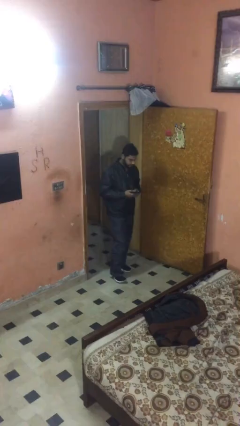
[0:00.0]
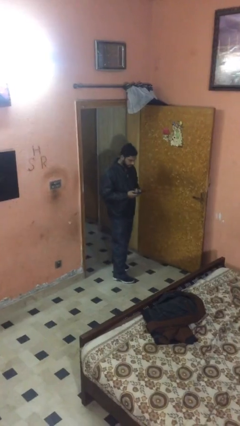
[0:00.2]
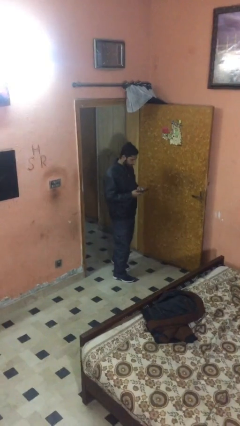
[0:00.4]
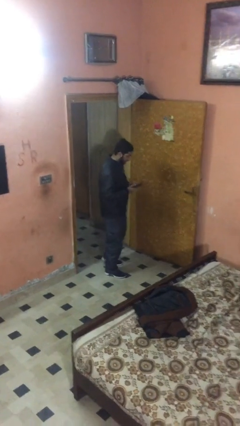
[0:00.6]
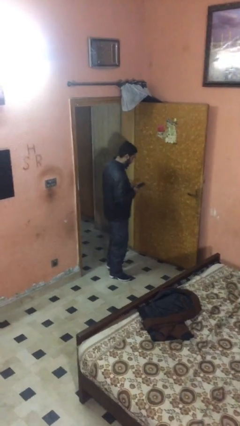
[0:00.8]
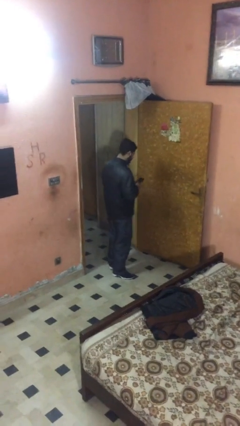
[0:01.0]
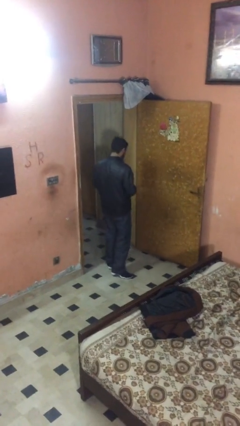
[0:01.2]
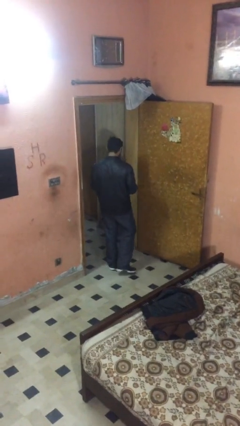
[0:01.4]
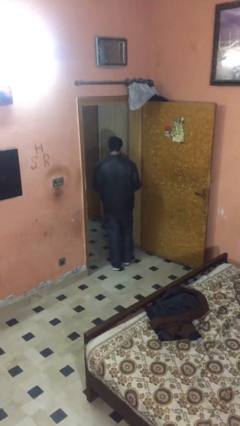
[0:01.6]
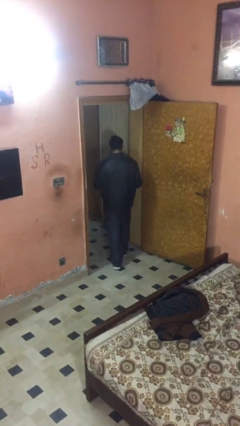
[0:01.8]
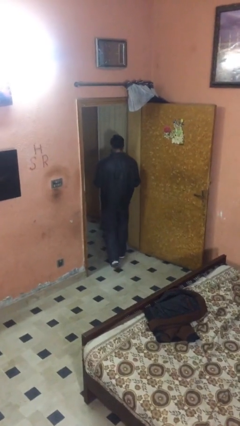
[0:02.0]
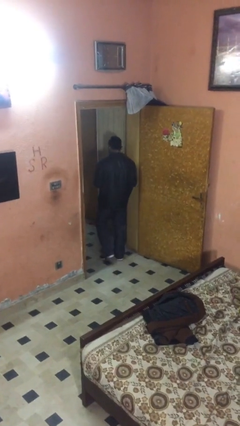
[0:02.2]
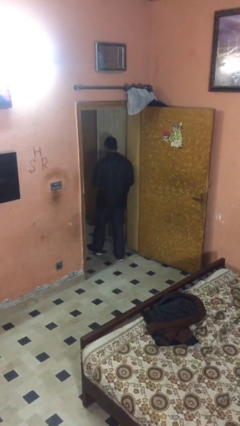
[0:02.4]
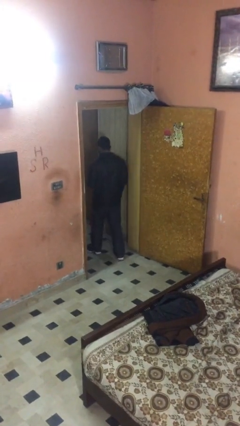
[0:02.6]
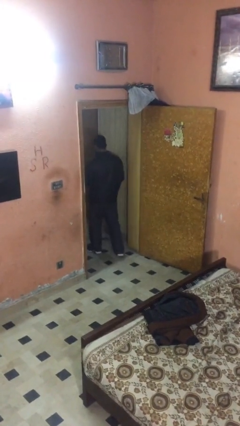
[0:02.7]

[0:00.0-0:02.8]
person exits scene through structure

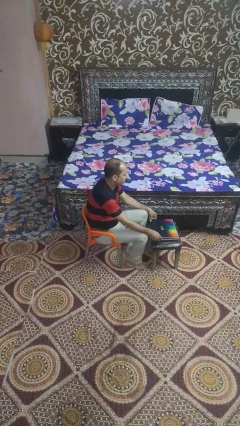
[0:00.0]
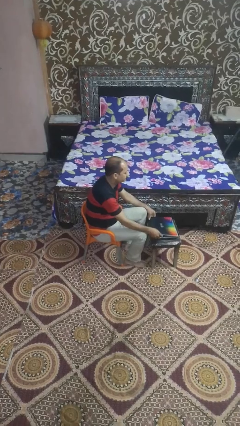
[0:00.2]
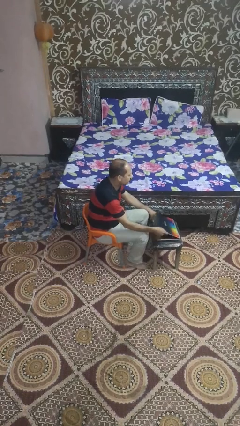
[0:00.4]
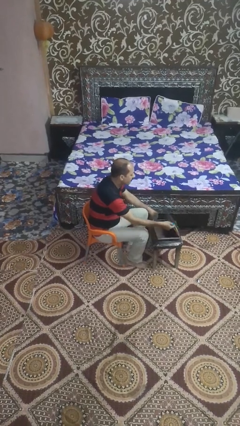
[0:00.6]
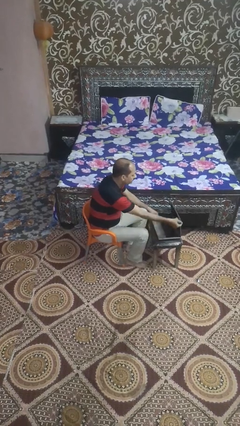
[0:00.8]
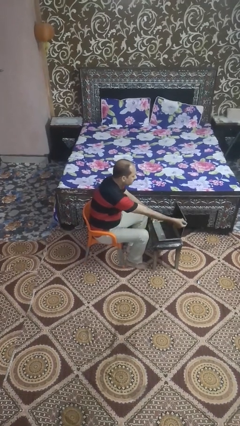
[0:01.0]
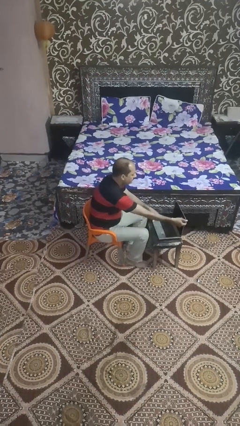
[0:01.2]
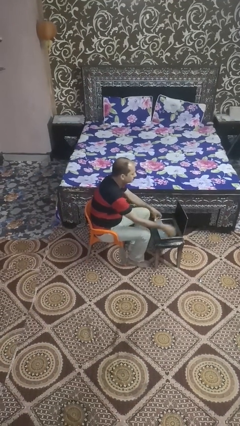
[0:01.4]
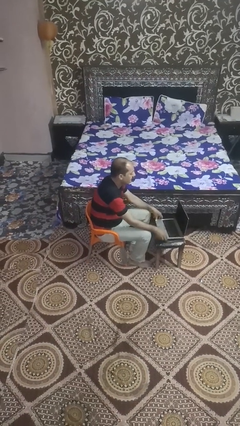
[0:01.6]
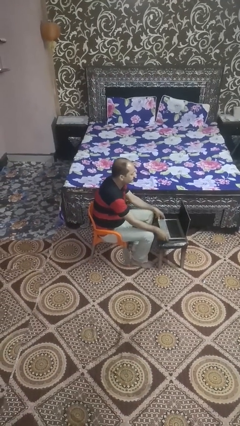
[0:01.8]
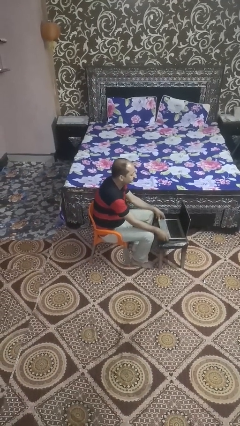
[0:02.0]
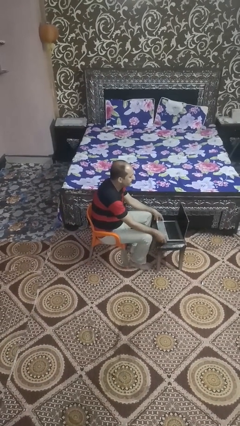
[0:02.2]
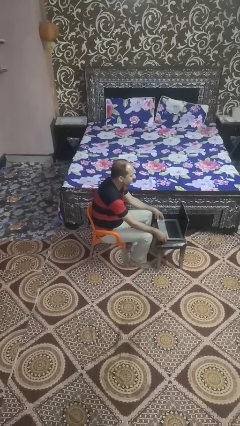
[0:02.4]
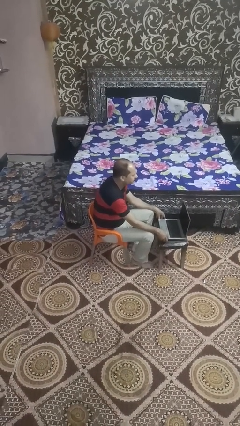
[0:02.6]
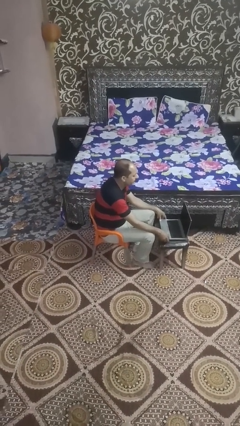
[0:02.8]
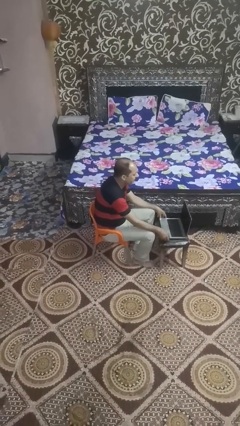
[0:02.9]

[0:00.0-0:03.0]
person opens laptop

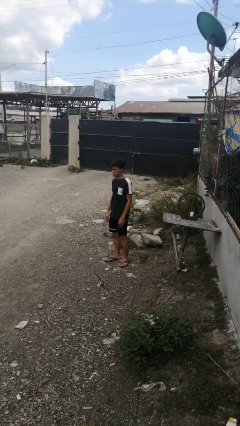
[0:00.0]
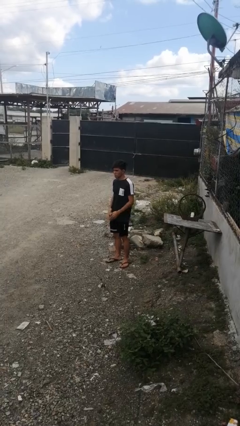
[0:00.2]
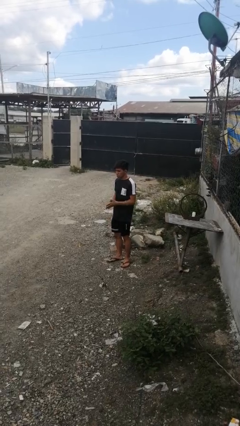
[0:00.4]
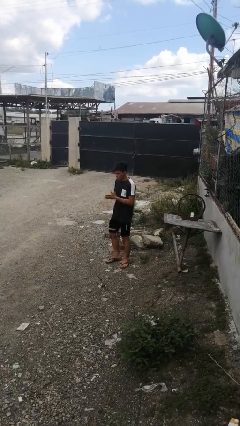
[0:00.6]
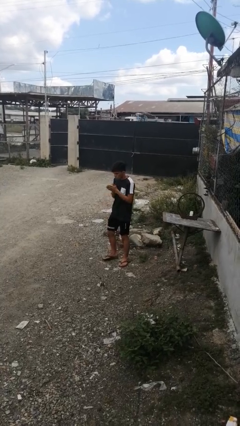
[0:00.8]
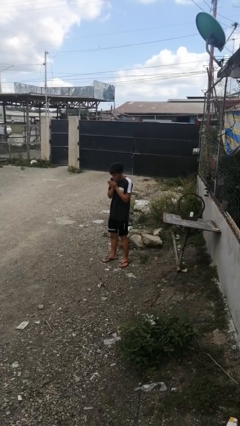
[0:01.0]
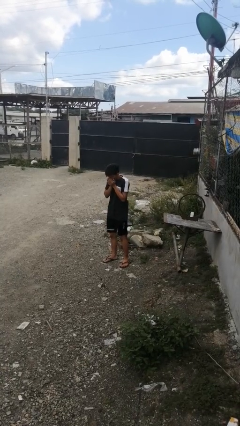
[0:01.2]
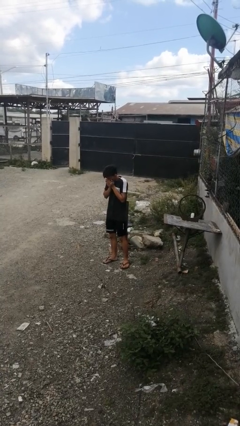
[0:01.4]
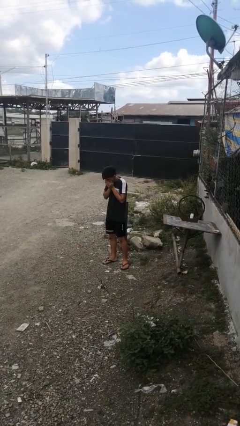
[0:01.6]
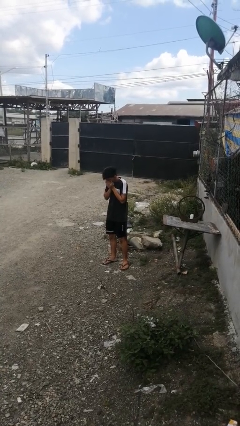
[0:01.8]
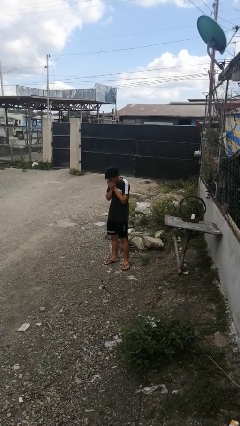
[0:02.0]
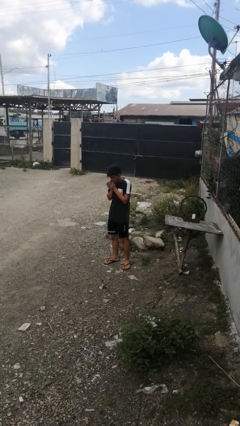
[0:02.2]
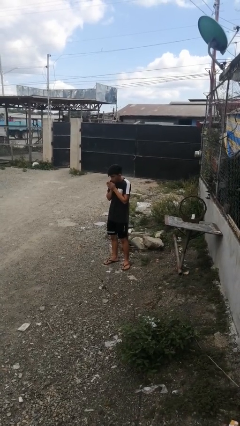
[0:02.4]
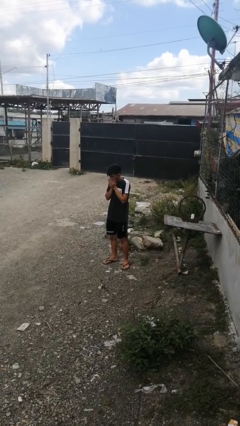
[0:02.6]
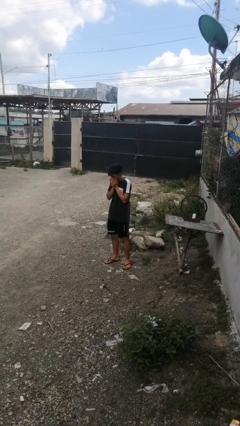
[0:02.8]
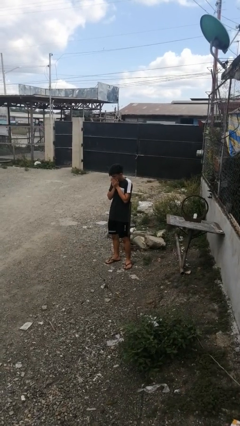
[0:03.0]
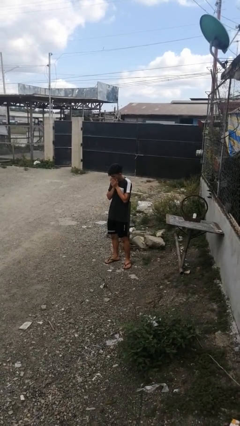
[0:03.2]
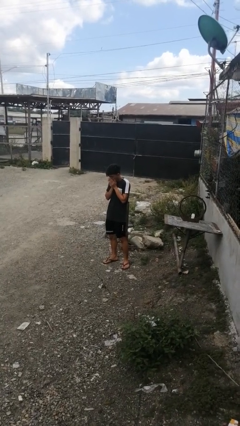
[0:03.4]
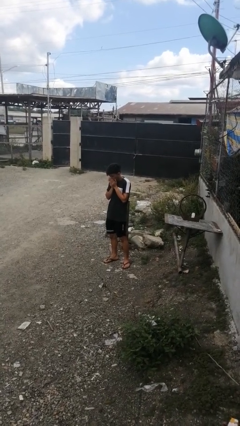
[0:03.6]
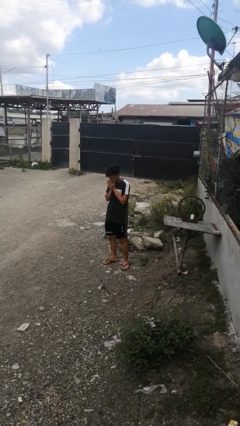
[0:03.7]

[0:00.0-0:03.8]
person blows into hands

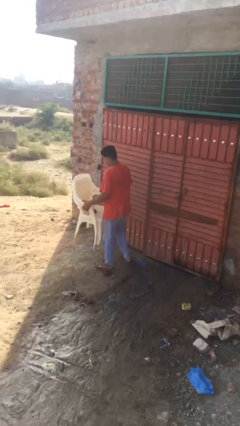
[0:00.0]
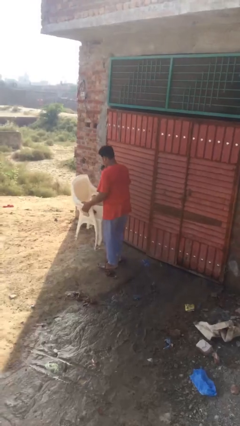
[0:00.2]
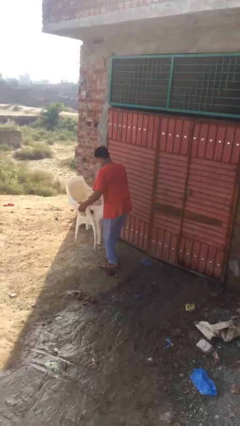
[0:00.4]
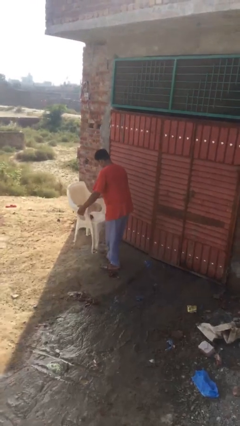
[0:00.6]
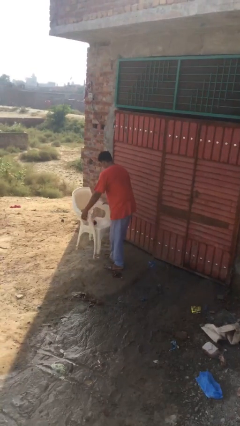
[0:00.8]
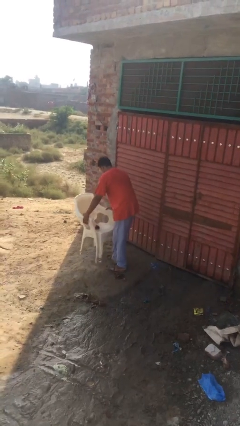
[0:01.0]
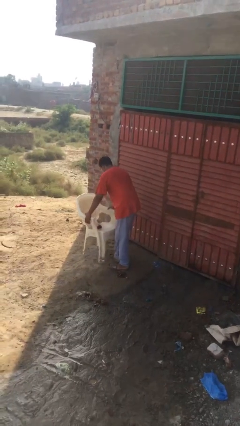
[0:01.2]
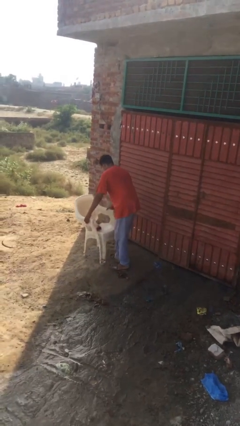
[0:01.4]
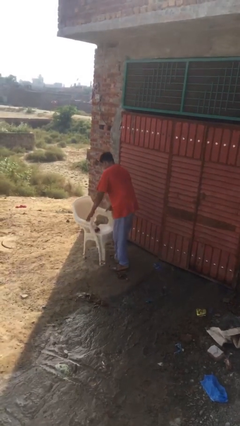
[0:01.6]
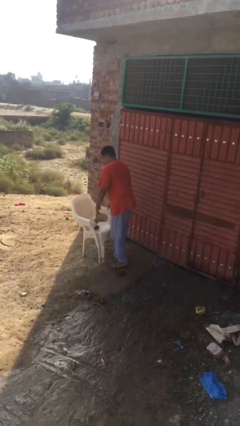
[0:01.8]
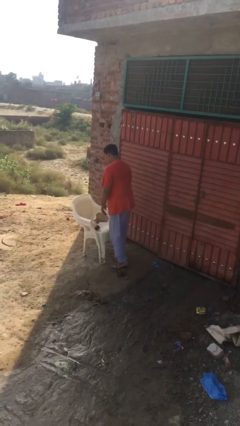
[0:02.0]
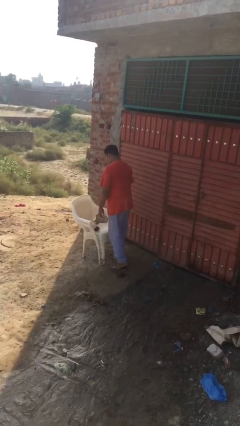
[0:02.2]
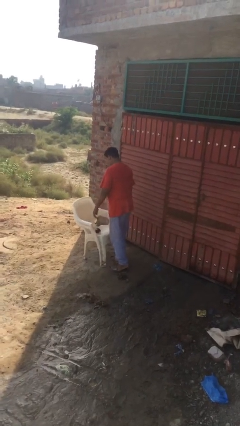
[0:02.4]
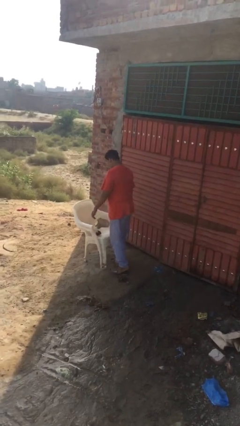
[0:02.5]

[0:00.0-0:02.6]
person puts down object on floor

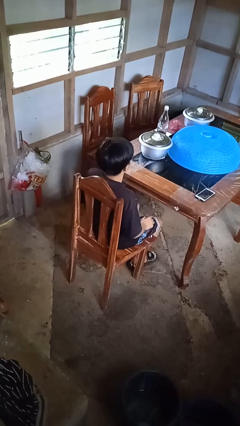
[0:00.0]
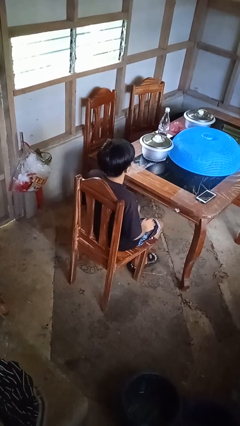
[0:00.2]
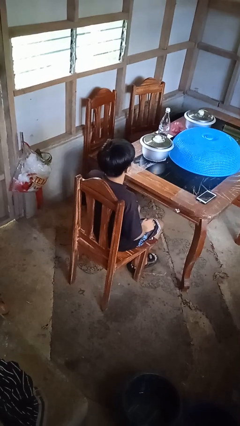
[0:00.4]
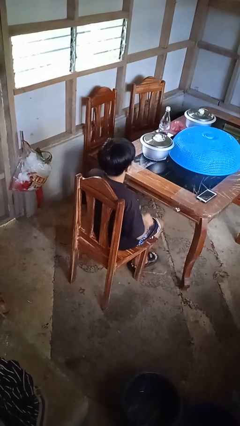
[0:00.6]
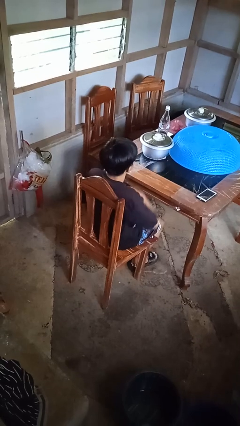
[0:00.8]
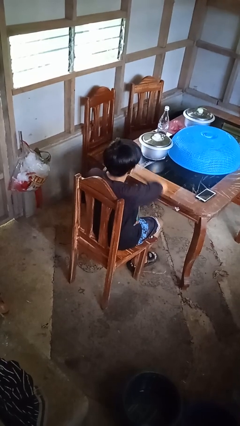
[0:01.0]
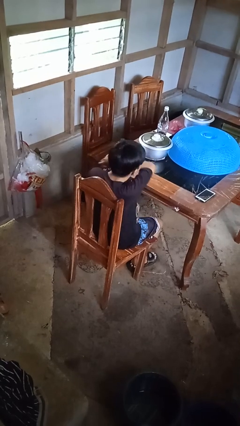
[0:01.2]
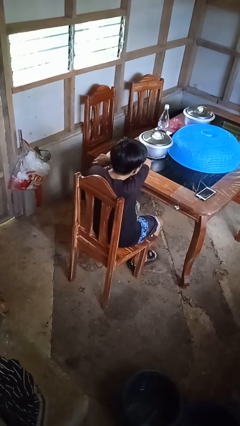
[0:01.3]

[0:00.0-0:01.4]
person sneezes into arm

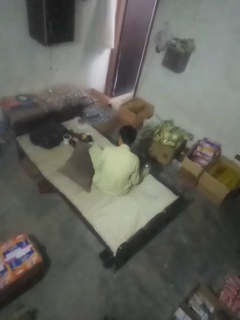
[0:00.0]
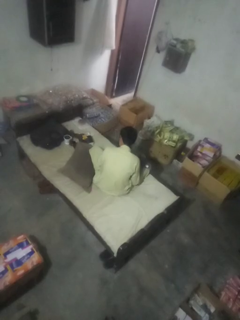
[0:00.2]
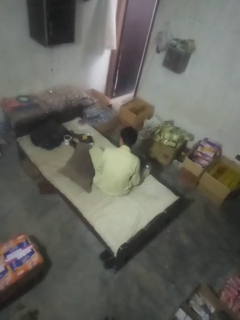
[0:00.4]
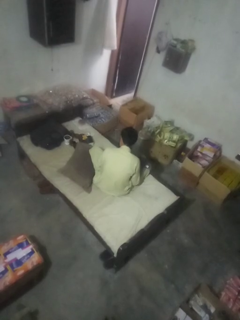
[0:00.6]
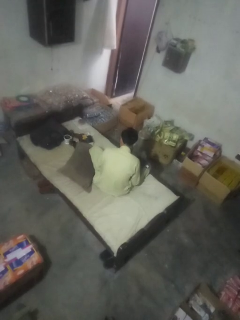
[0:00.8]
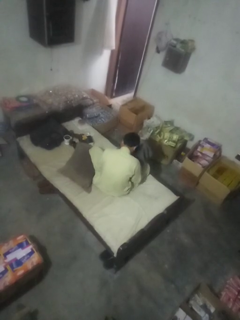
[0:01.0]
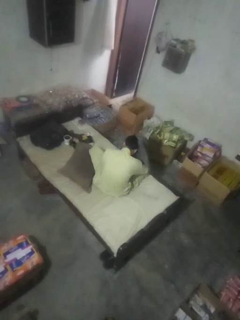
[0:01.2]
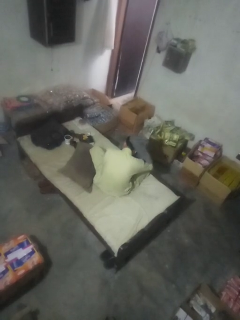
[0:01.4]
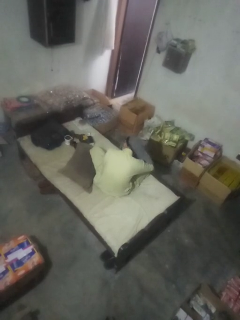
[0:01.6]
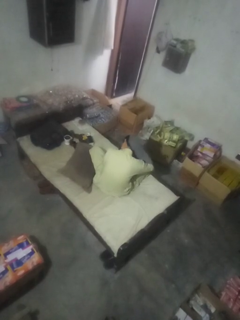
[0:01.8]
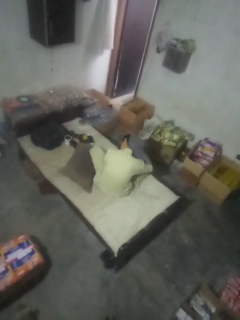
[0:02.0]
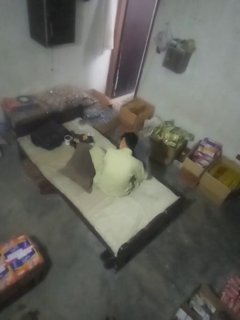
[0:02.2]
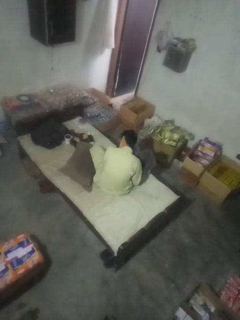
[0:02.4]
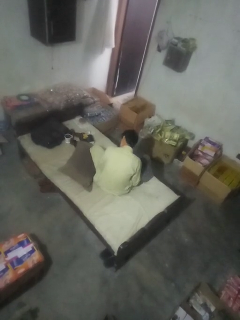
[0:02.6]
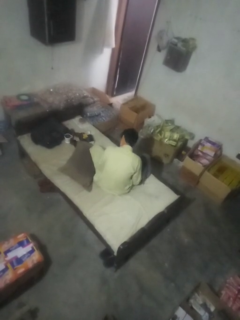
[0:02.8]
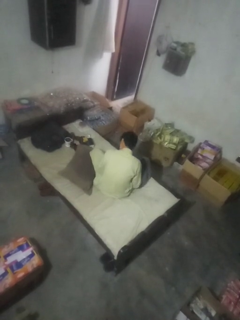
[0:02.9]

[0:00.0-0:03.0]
person dries hair with towel

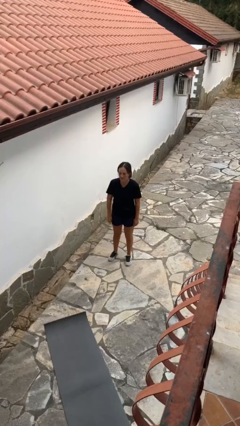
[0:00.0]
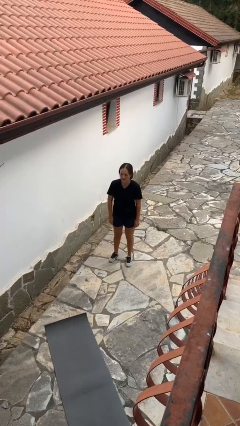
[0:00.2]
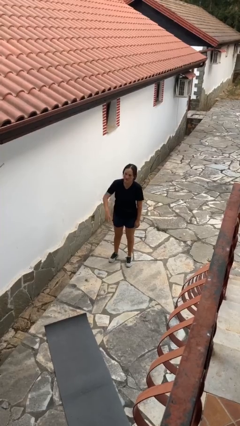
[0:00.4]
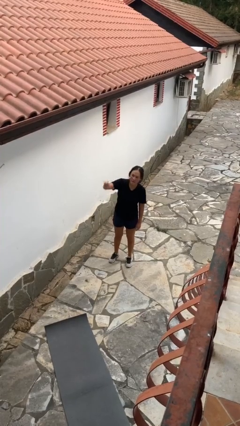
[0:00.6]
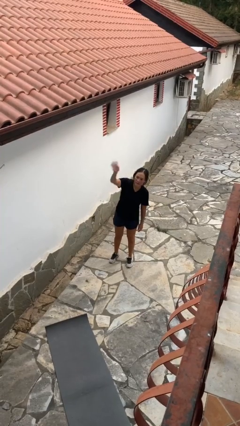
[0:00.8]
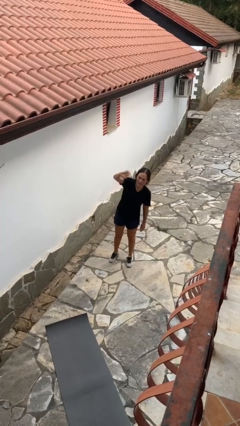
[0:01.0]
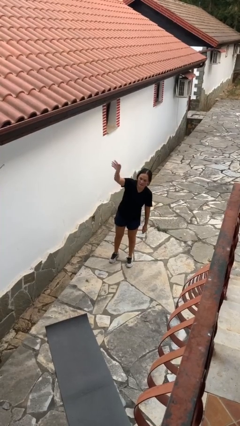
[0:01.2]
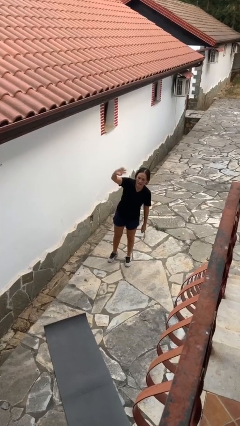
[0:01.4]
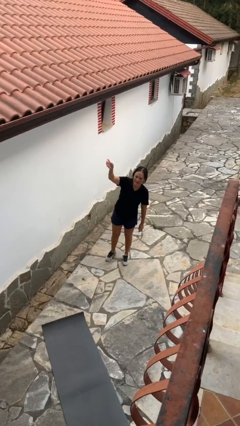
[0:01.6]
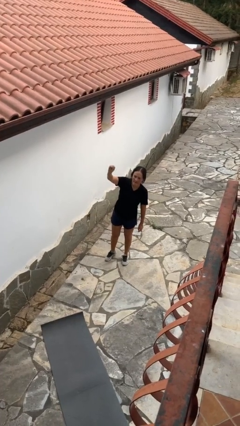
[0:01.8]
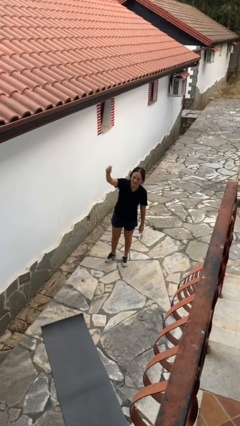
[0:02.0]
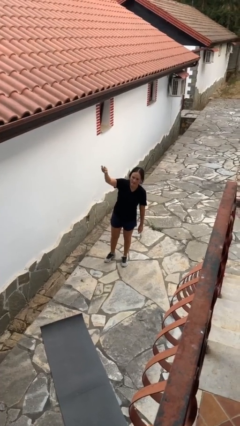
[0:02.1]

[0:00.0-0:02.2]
person gestures raise hand
